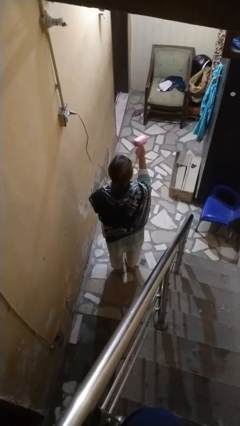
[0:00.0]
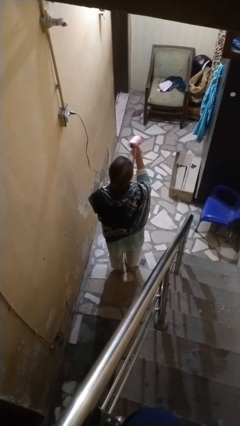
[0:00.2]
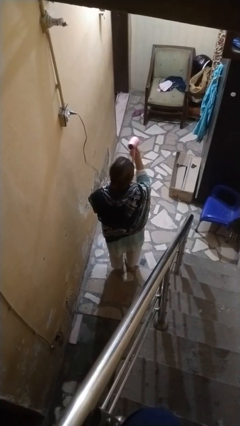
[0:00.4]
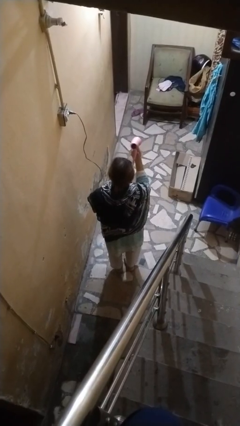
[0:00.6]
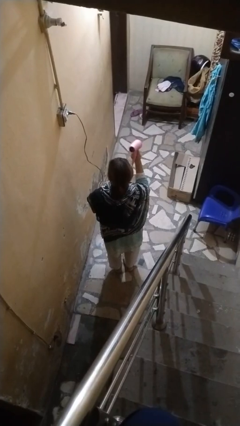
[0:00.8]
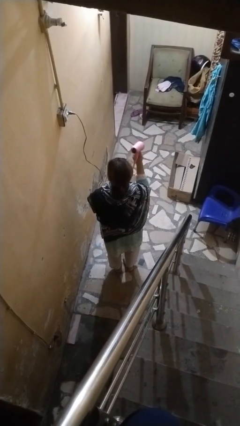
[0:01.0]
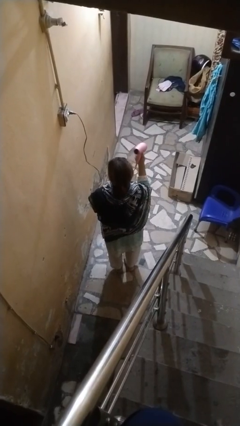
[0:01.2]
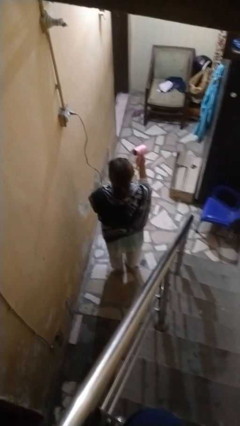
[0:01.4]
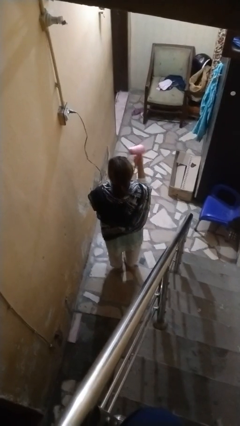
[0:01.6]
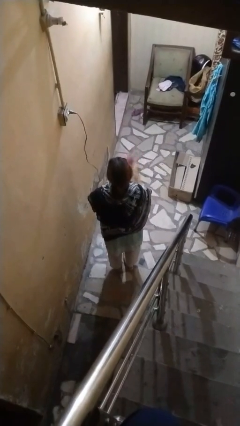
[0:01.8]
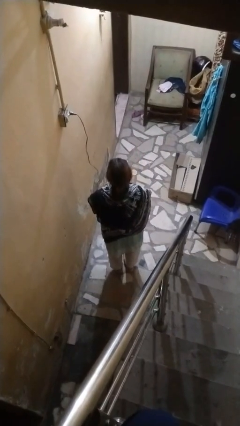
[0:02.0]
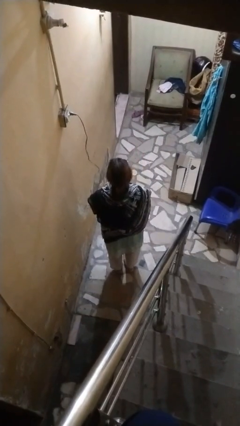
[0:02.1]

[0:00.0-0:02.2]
person dries hair with hairdryer

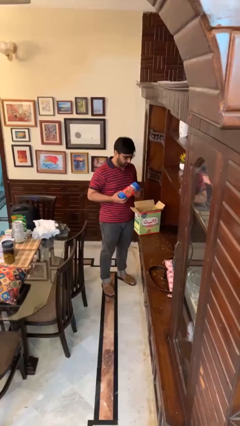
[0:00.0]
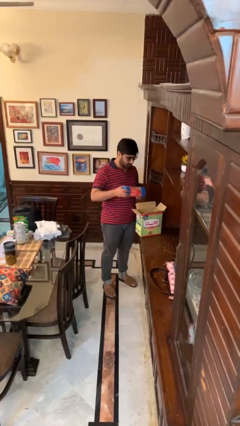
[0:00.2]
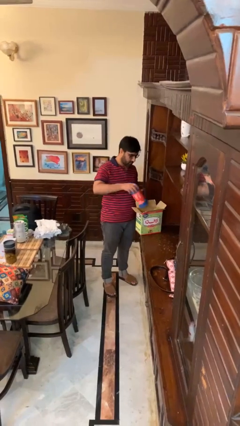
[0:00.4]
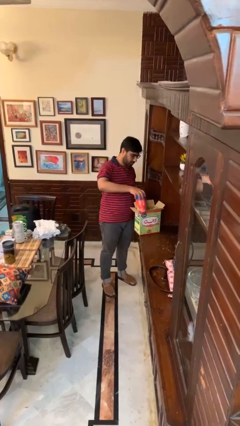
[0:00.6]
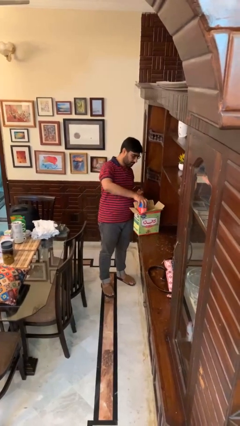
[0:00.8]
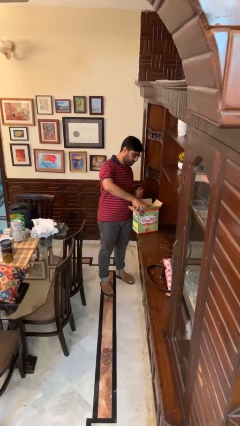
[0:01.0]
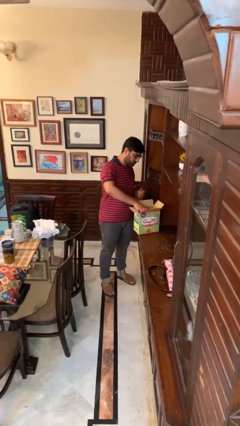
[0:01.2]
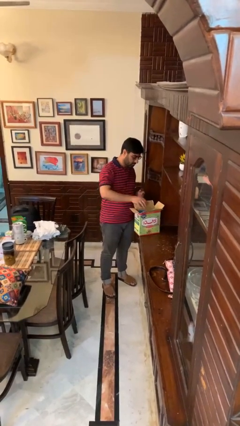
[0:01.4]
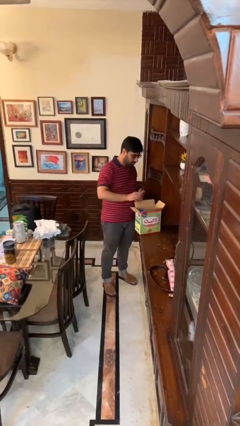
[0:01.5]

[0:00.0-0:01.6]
person puts object into box

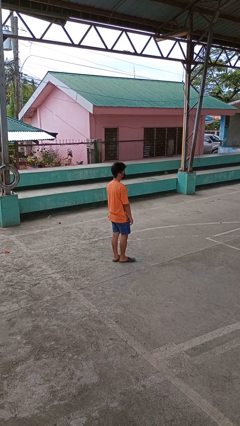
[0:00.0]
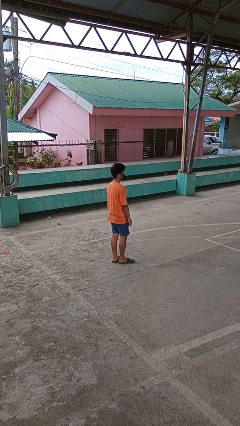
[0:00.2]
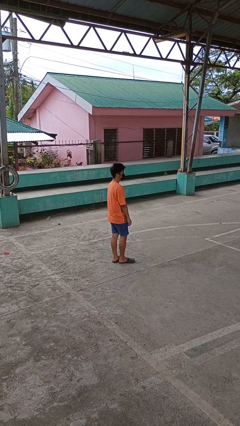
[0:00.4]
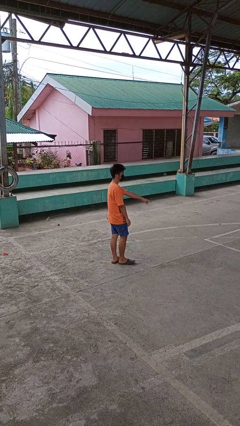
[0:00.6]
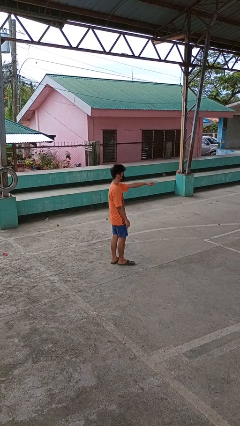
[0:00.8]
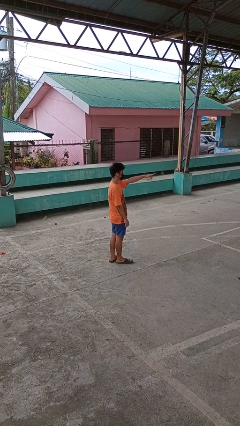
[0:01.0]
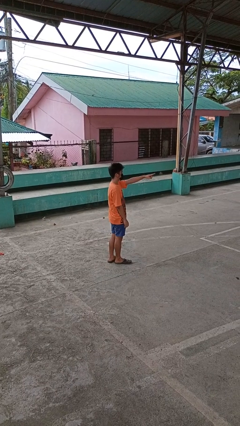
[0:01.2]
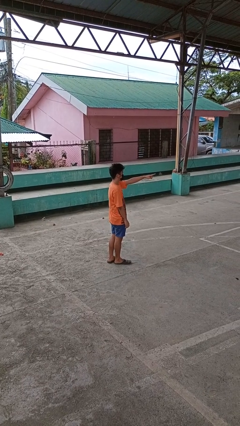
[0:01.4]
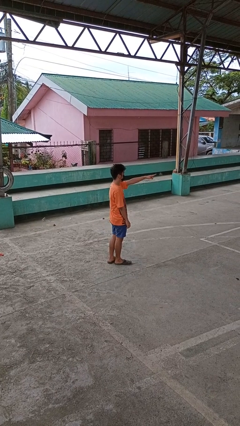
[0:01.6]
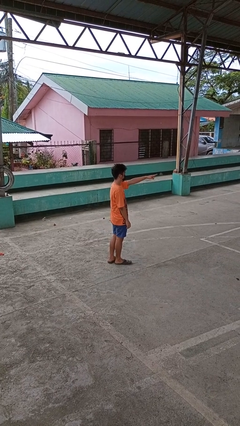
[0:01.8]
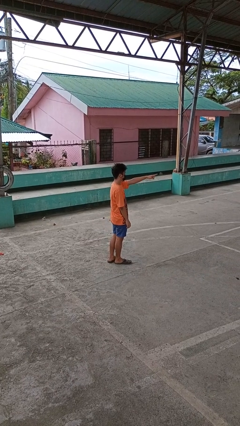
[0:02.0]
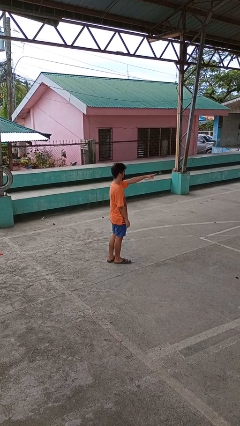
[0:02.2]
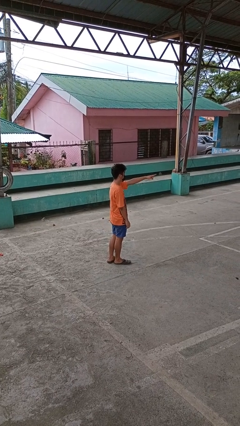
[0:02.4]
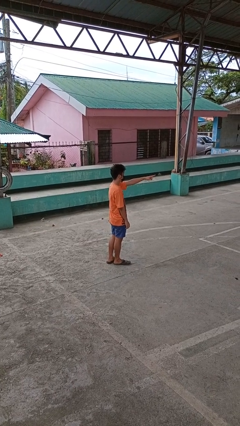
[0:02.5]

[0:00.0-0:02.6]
person points at person

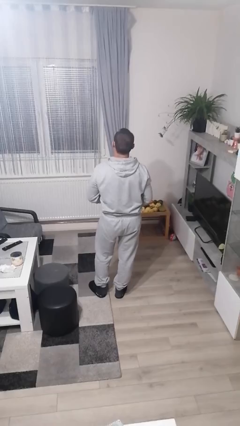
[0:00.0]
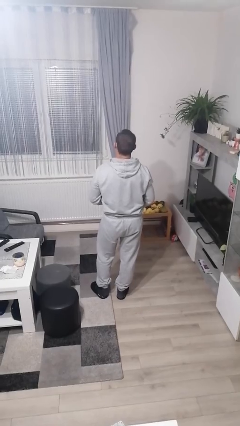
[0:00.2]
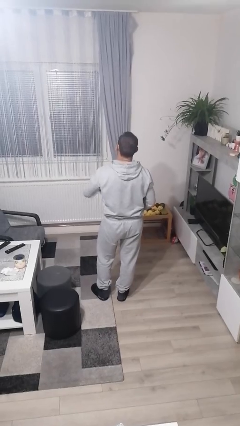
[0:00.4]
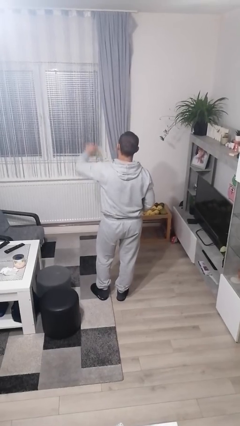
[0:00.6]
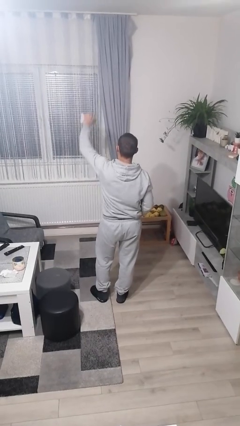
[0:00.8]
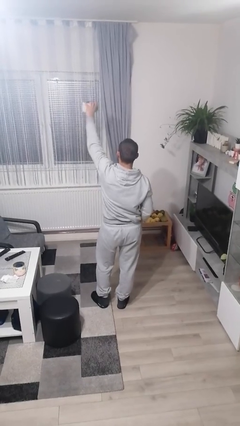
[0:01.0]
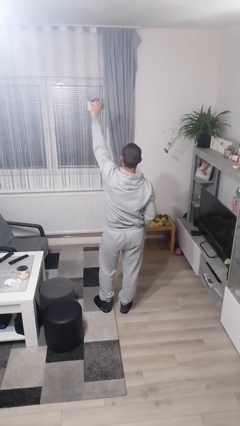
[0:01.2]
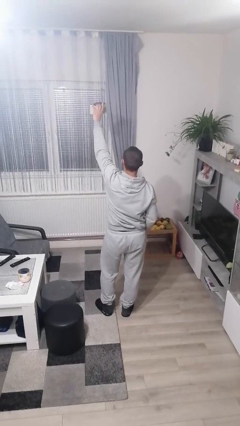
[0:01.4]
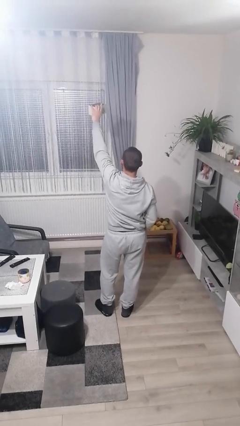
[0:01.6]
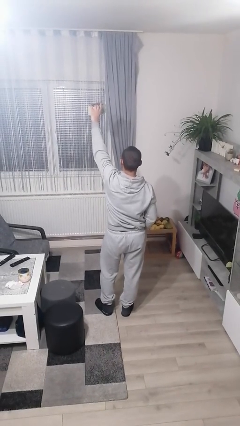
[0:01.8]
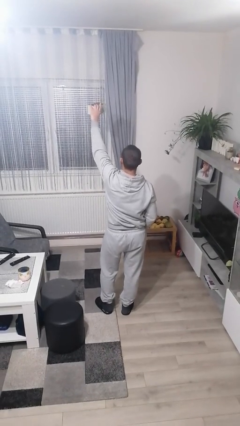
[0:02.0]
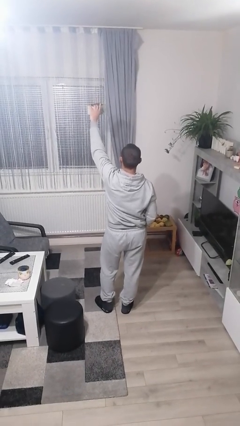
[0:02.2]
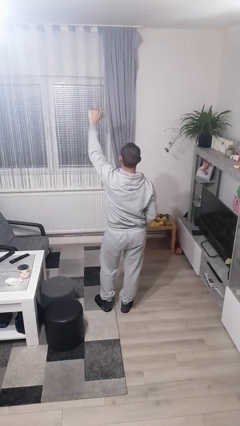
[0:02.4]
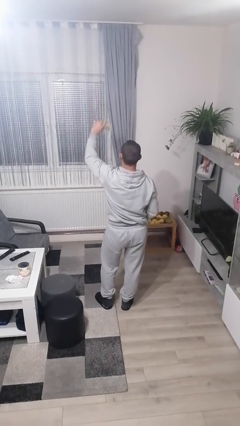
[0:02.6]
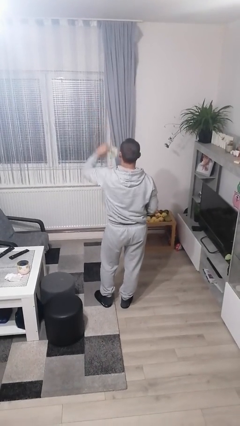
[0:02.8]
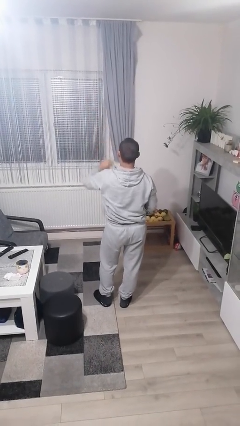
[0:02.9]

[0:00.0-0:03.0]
person holds object above head

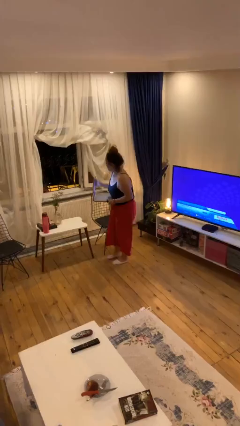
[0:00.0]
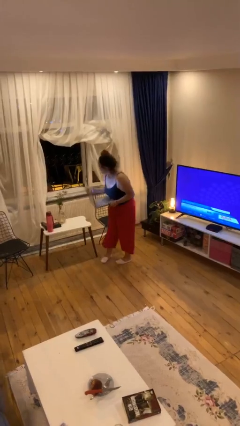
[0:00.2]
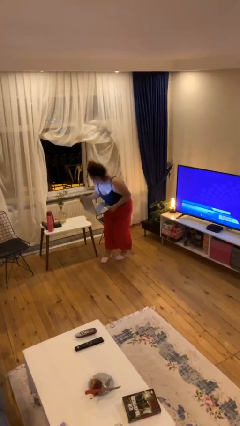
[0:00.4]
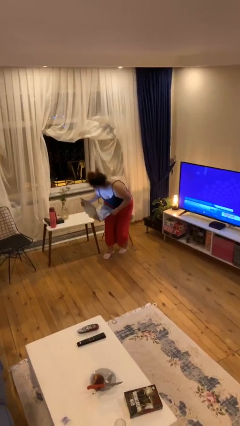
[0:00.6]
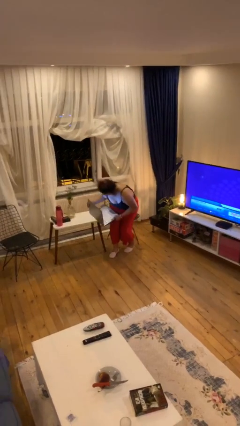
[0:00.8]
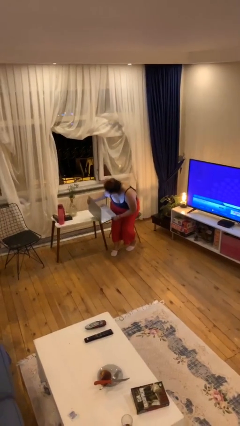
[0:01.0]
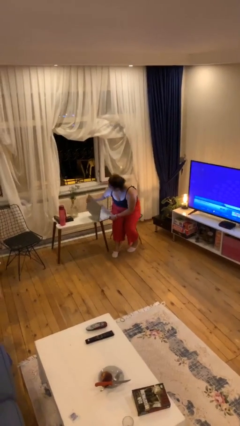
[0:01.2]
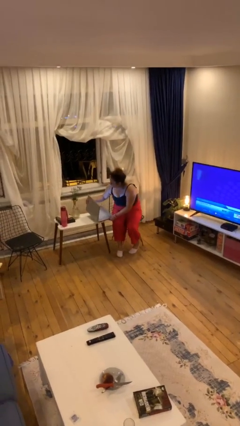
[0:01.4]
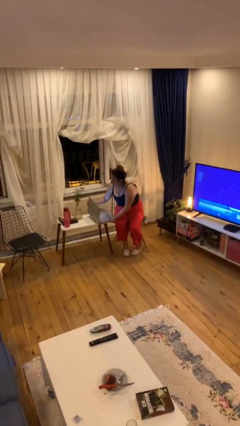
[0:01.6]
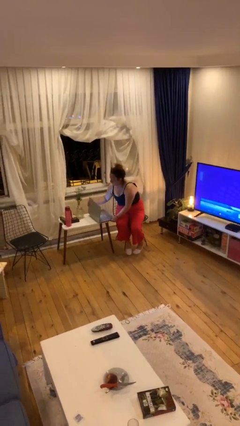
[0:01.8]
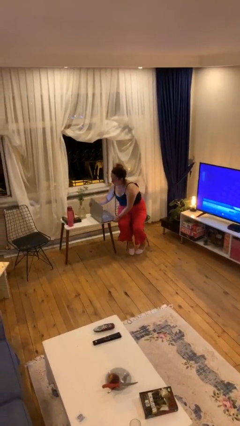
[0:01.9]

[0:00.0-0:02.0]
person sits down

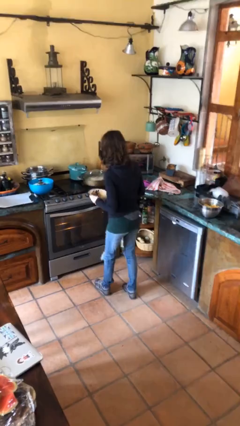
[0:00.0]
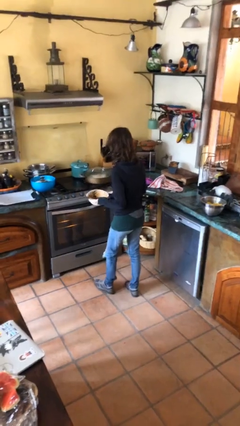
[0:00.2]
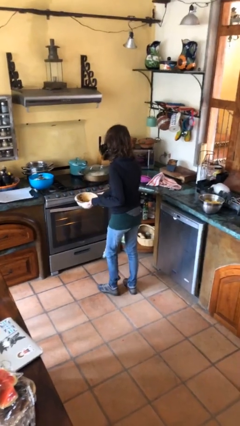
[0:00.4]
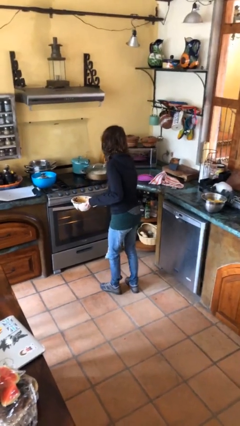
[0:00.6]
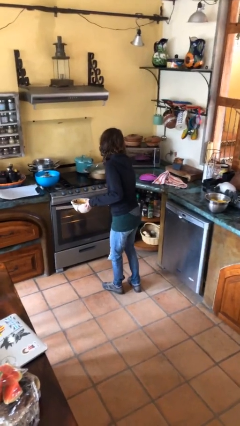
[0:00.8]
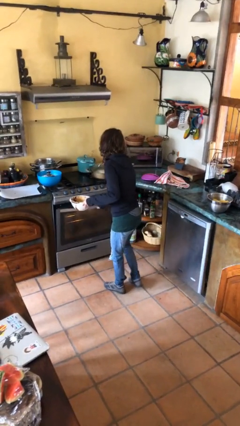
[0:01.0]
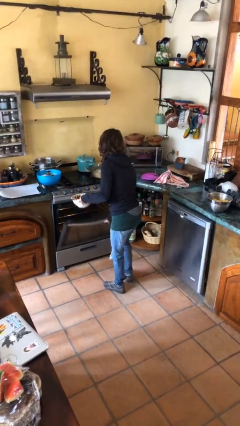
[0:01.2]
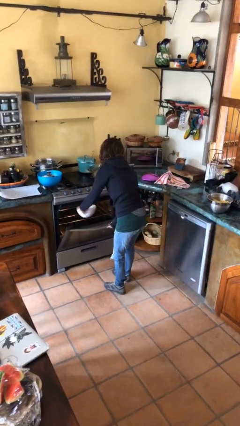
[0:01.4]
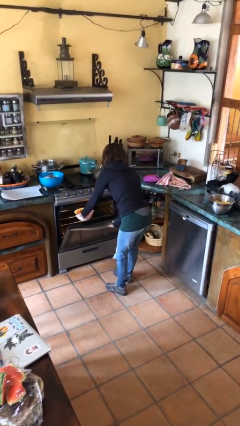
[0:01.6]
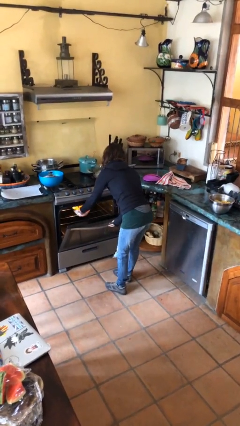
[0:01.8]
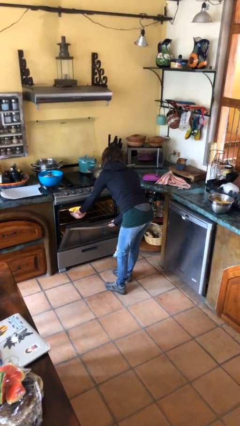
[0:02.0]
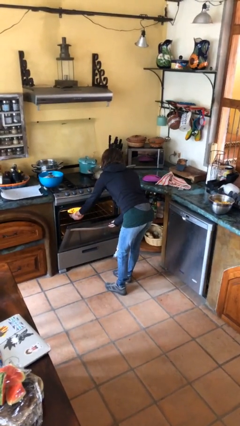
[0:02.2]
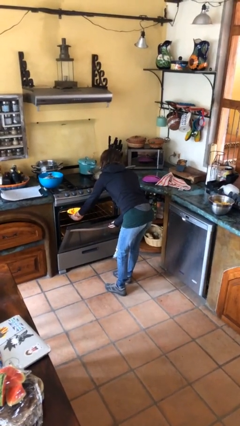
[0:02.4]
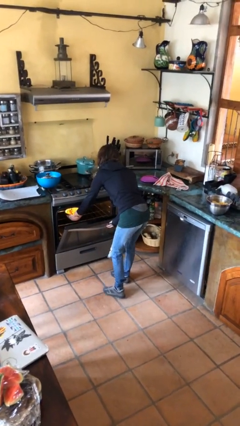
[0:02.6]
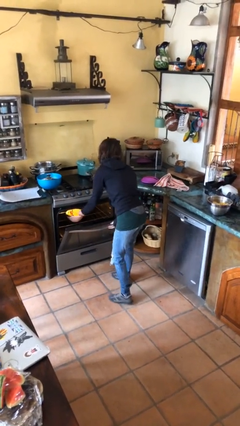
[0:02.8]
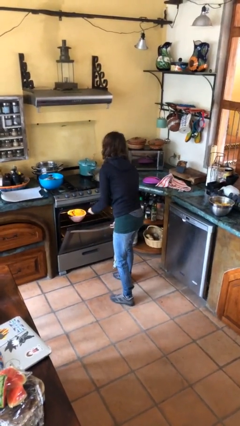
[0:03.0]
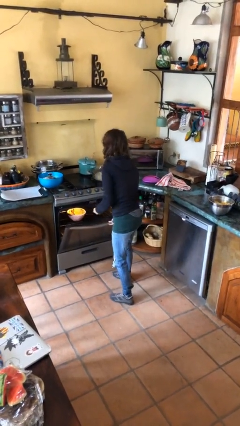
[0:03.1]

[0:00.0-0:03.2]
person puts object into oven

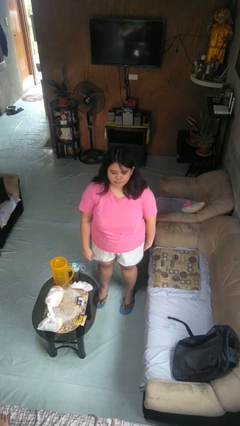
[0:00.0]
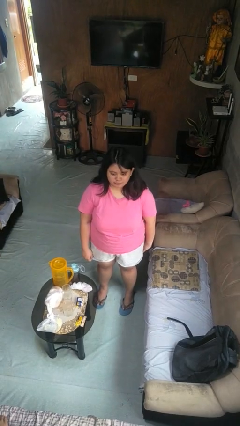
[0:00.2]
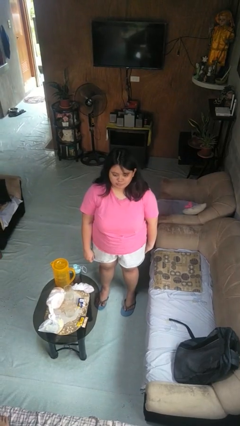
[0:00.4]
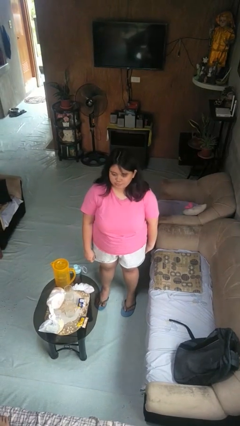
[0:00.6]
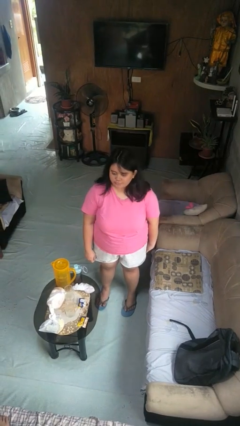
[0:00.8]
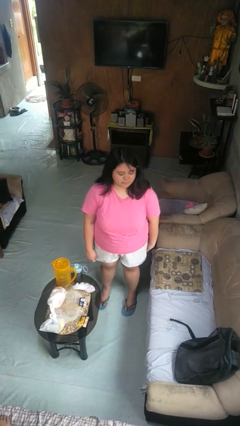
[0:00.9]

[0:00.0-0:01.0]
person shakes head

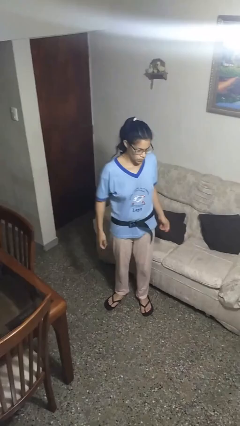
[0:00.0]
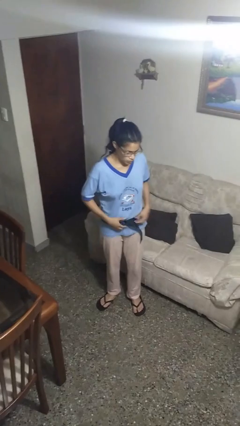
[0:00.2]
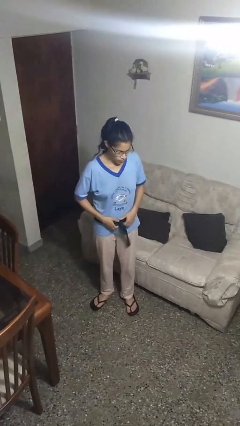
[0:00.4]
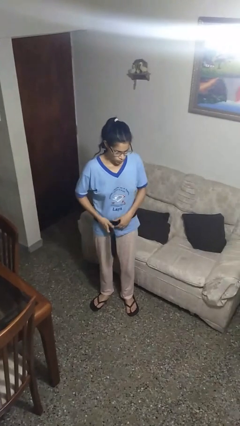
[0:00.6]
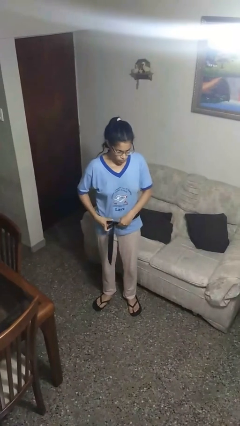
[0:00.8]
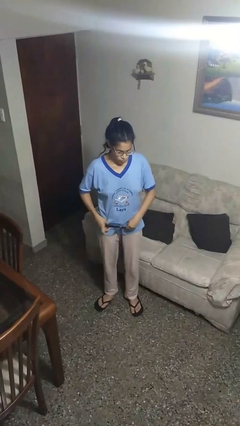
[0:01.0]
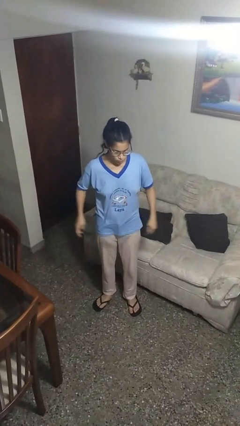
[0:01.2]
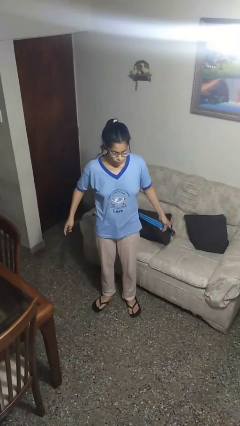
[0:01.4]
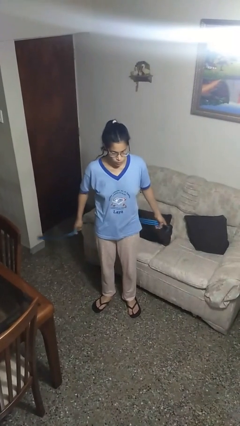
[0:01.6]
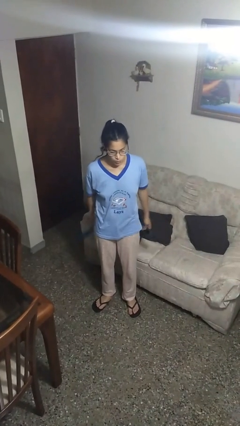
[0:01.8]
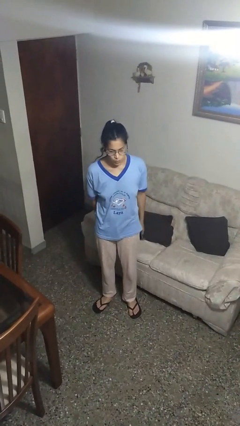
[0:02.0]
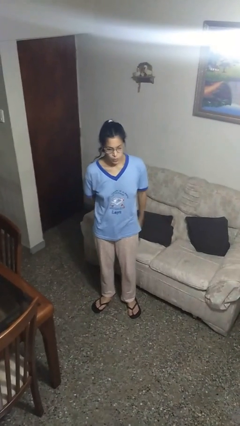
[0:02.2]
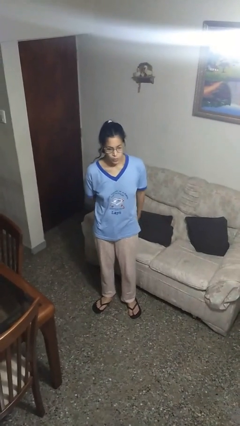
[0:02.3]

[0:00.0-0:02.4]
person takes off belt